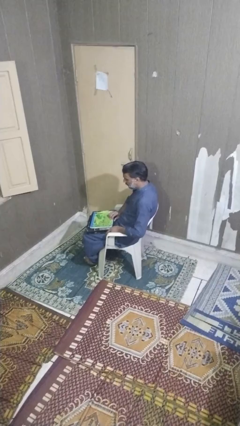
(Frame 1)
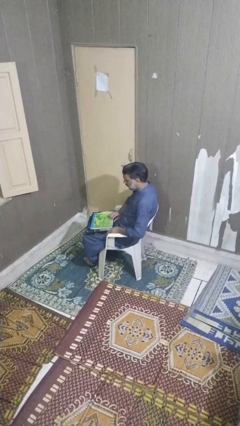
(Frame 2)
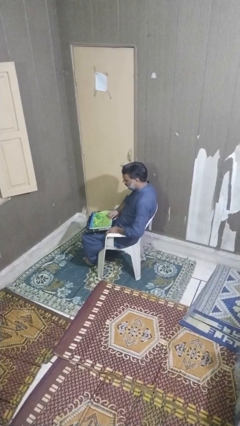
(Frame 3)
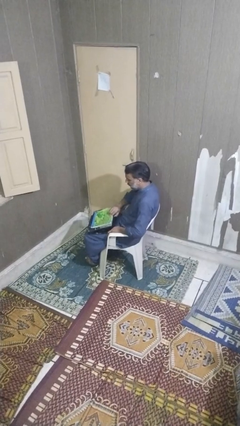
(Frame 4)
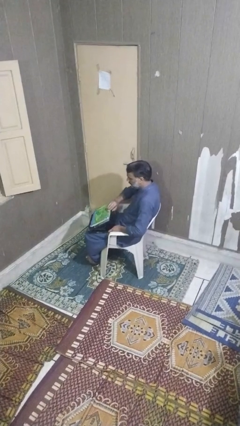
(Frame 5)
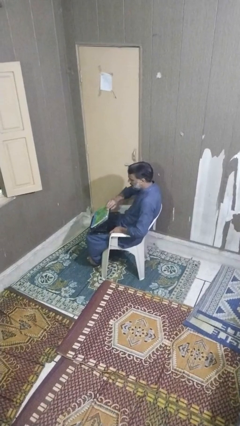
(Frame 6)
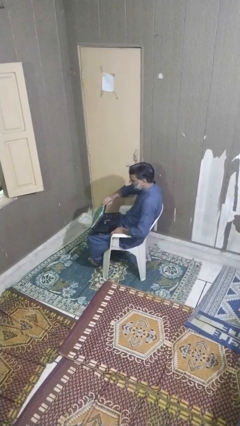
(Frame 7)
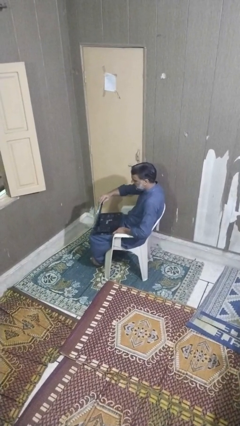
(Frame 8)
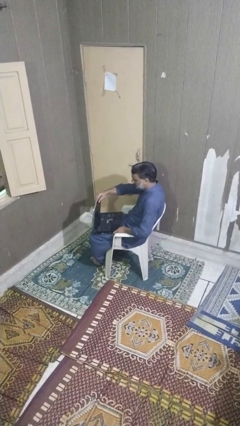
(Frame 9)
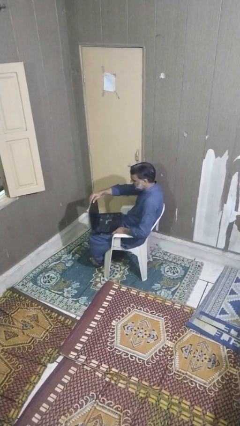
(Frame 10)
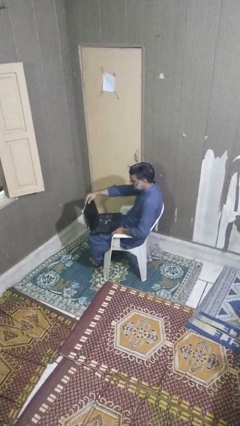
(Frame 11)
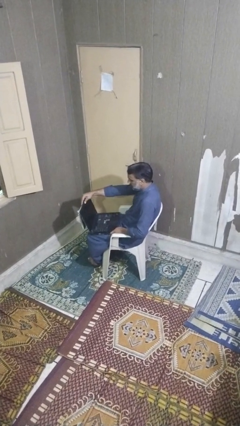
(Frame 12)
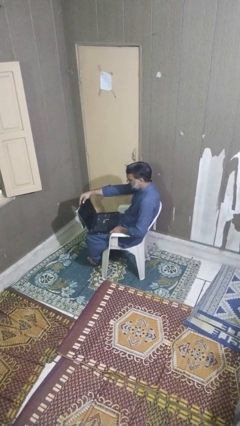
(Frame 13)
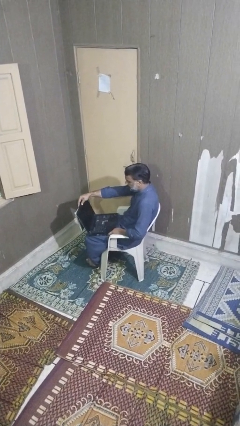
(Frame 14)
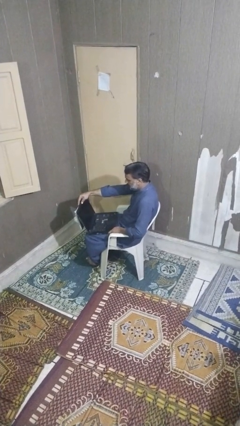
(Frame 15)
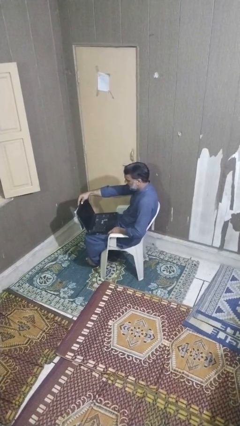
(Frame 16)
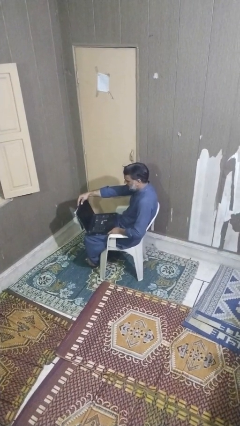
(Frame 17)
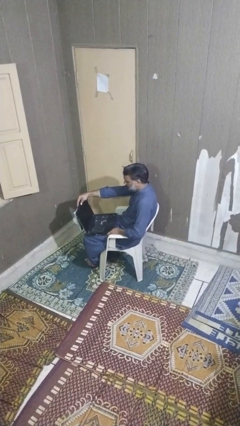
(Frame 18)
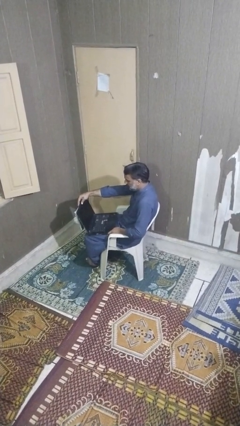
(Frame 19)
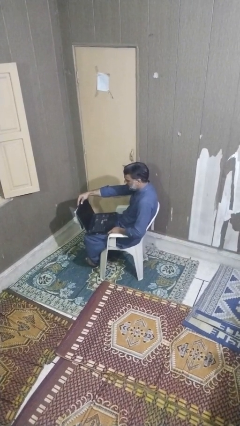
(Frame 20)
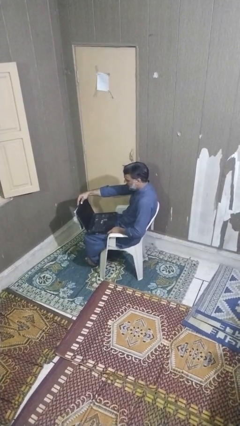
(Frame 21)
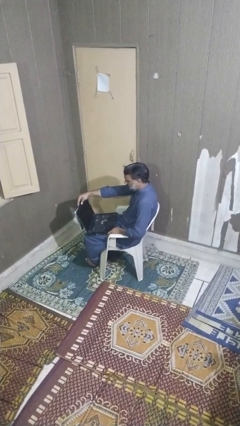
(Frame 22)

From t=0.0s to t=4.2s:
person opens laptop

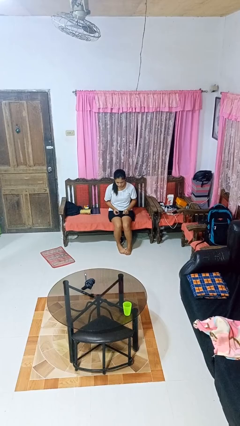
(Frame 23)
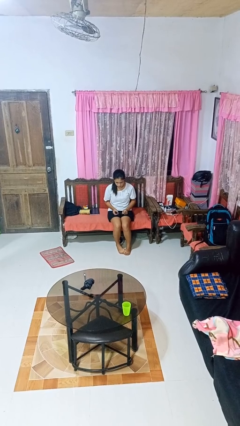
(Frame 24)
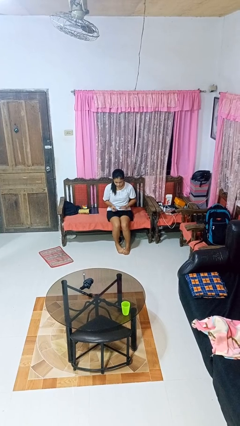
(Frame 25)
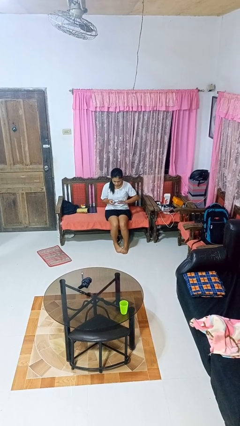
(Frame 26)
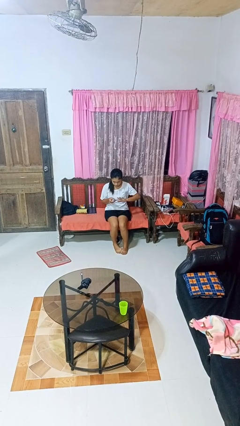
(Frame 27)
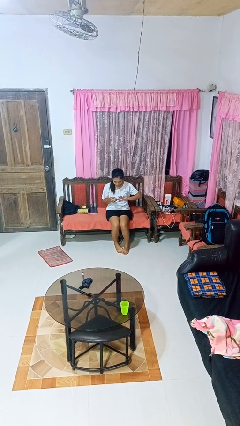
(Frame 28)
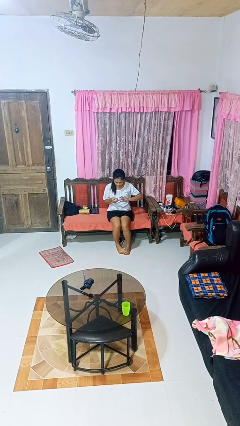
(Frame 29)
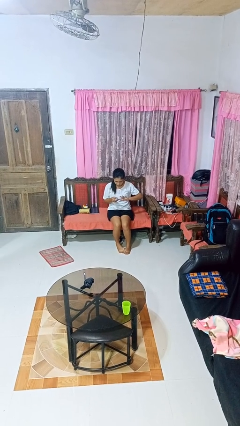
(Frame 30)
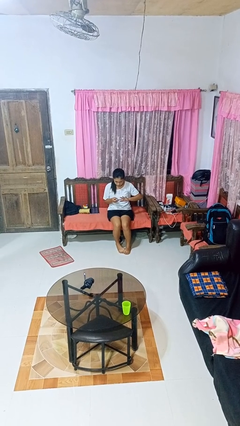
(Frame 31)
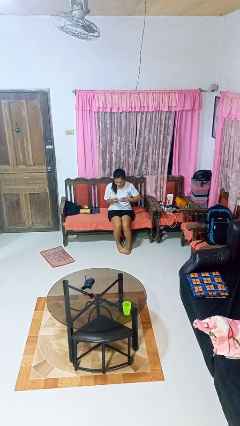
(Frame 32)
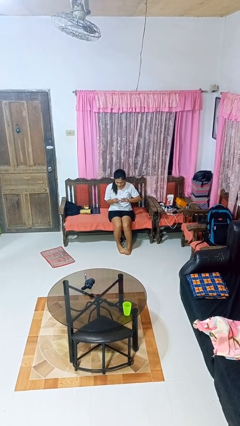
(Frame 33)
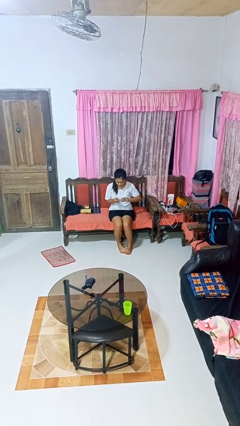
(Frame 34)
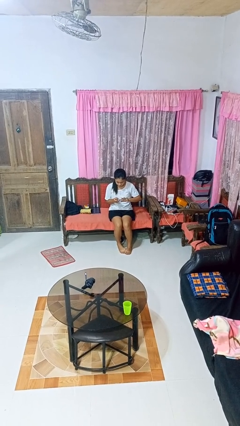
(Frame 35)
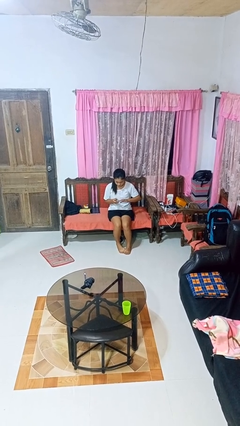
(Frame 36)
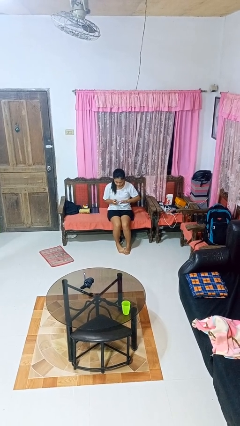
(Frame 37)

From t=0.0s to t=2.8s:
person clips fingernails

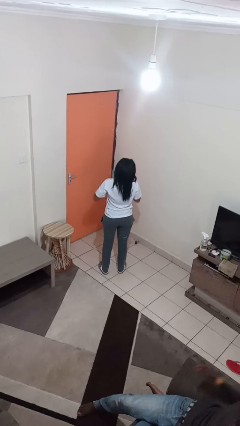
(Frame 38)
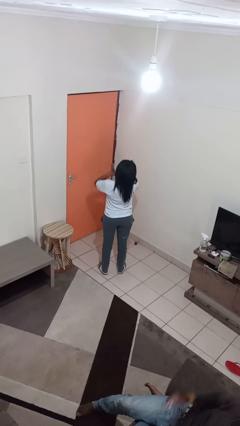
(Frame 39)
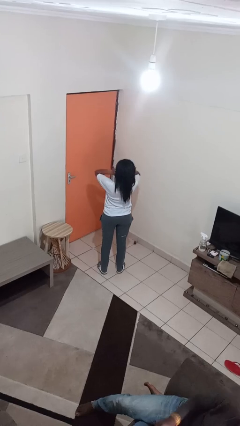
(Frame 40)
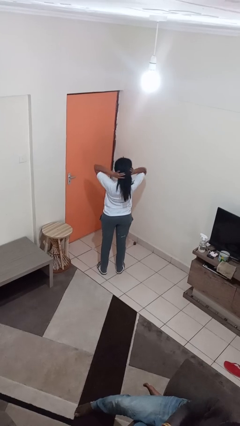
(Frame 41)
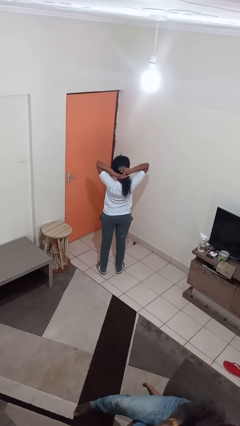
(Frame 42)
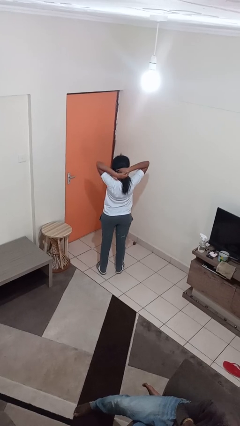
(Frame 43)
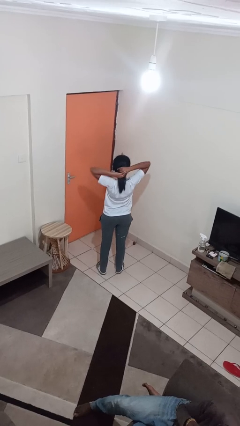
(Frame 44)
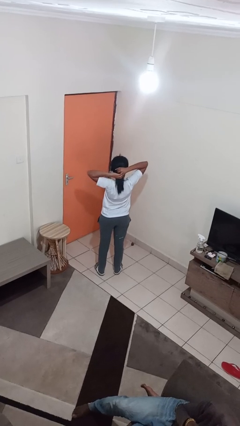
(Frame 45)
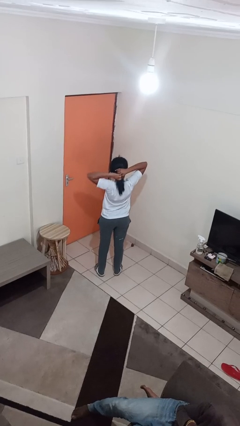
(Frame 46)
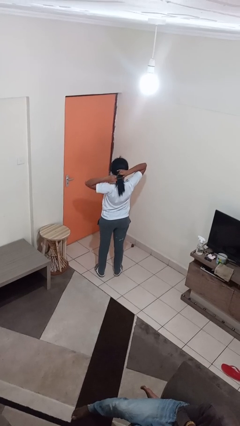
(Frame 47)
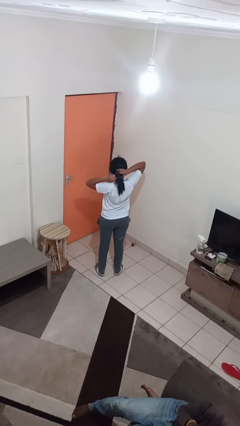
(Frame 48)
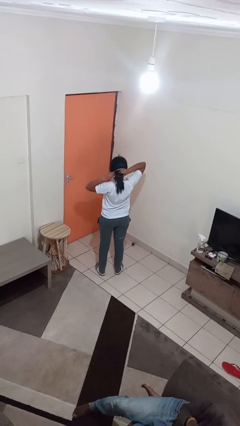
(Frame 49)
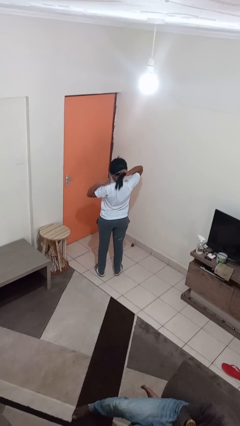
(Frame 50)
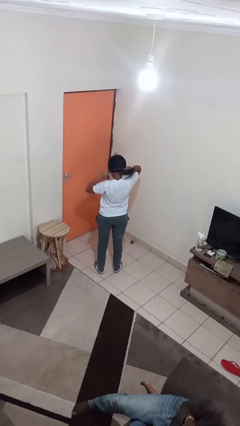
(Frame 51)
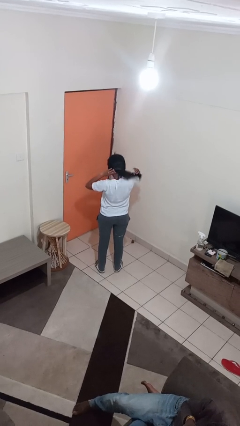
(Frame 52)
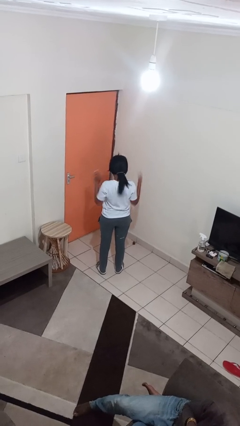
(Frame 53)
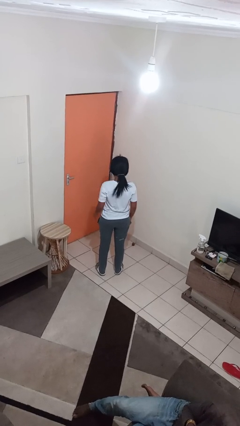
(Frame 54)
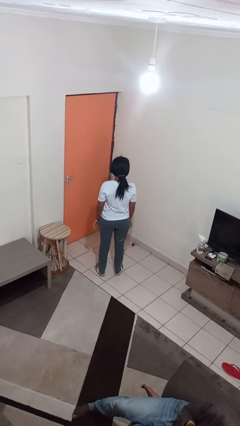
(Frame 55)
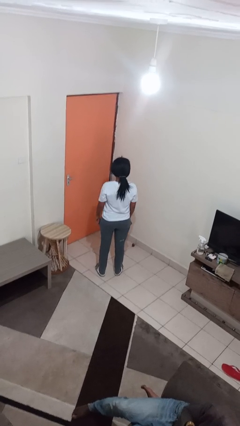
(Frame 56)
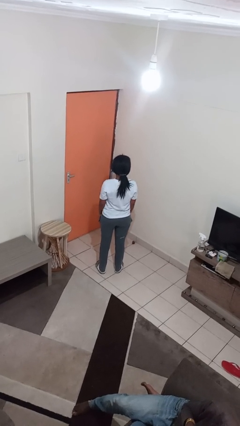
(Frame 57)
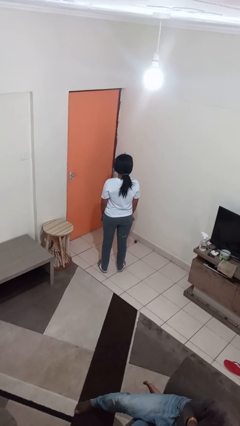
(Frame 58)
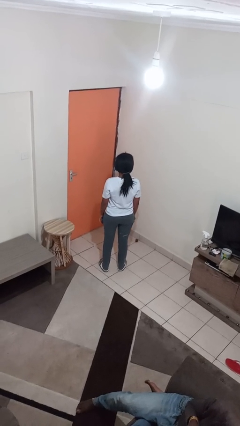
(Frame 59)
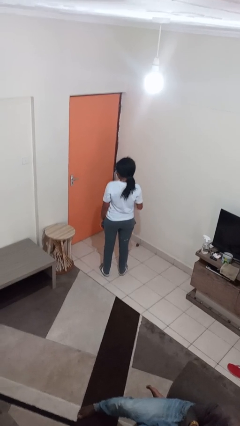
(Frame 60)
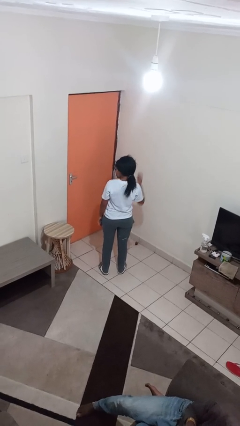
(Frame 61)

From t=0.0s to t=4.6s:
person puts hair in ponytail

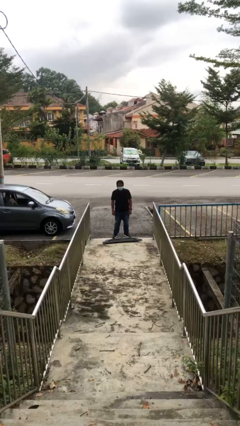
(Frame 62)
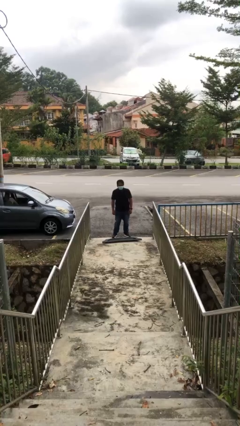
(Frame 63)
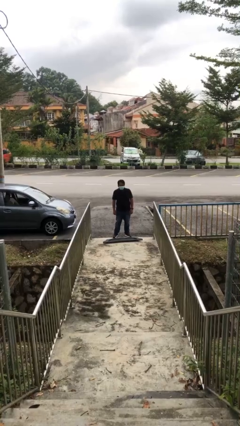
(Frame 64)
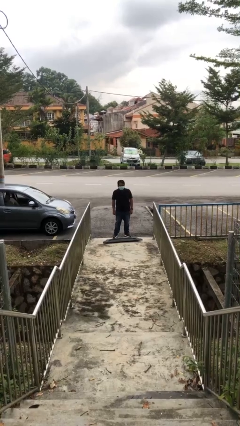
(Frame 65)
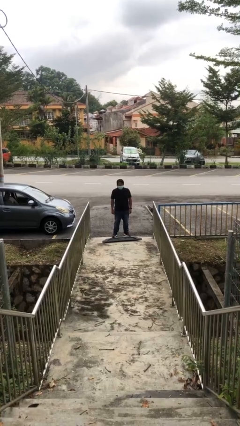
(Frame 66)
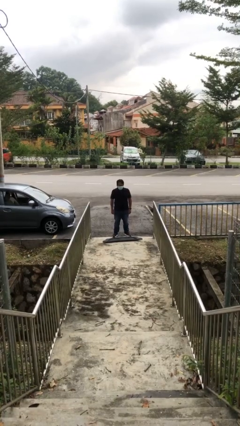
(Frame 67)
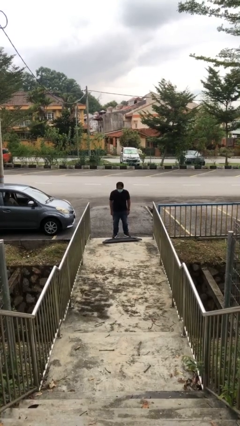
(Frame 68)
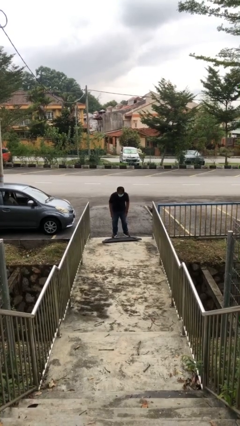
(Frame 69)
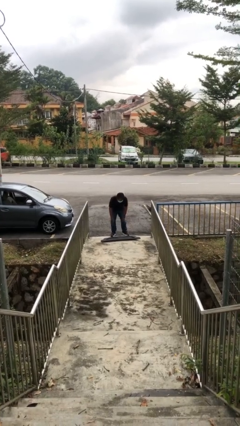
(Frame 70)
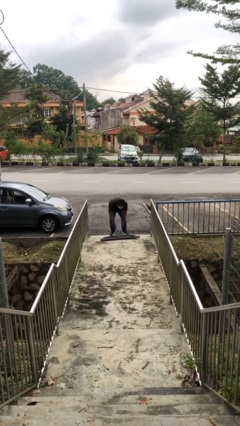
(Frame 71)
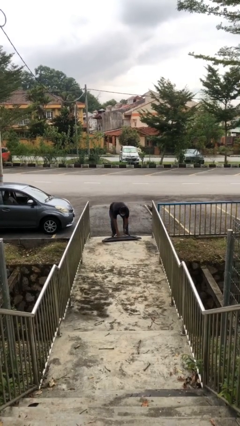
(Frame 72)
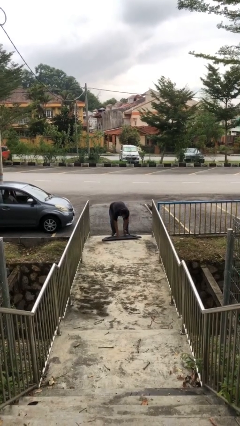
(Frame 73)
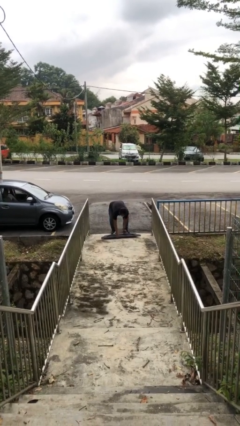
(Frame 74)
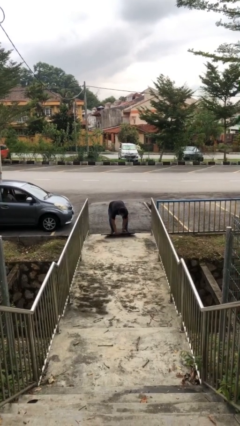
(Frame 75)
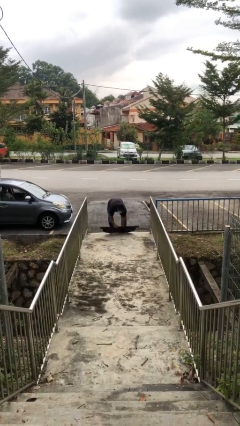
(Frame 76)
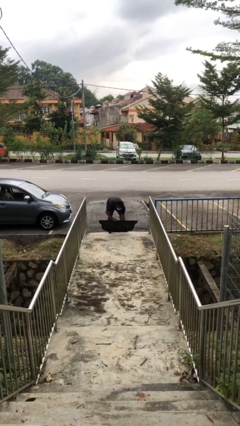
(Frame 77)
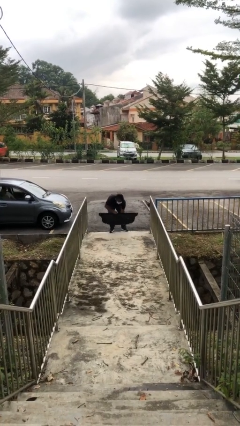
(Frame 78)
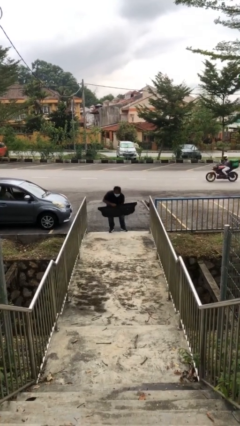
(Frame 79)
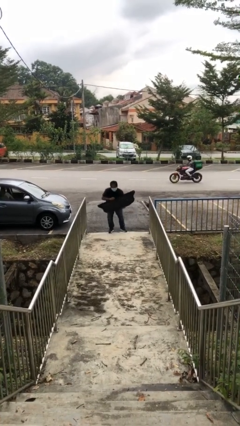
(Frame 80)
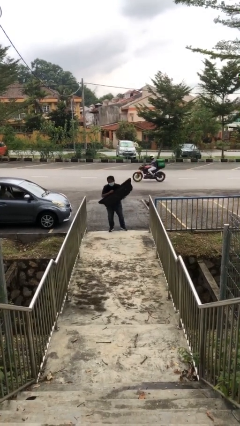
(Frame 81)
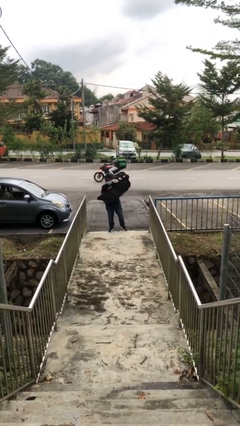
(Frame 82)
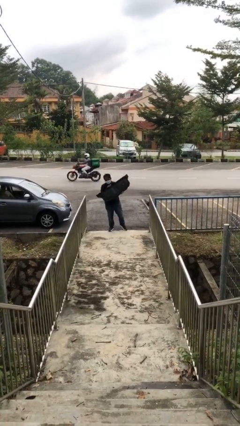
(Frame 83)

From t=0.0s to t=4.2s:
person picks up object from floor

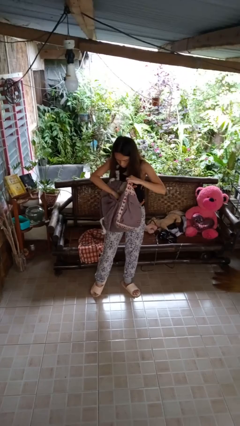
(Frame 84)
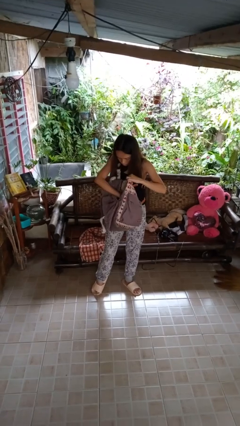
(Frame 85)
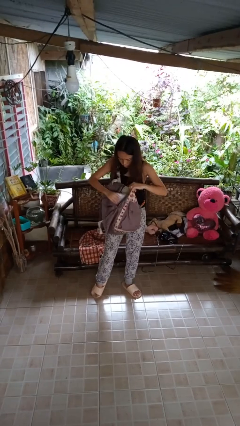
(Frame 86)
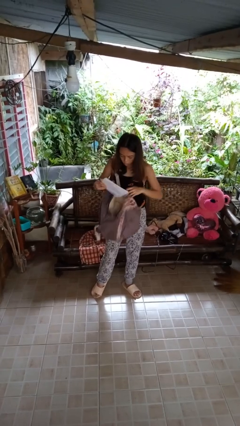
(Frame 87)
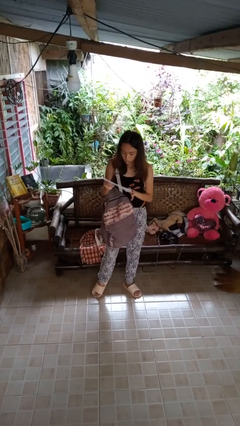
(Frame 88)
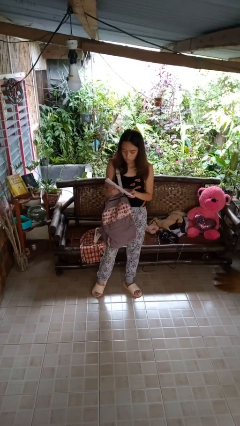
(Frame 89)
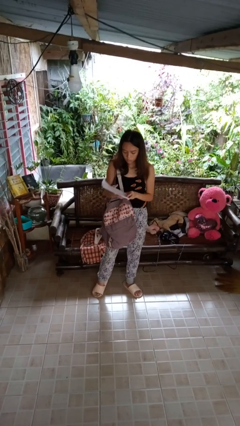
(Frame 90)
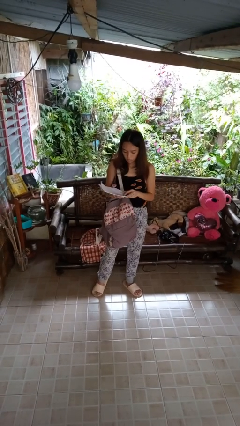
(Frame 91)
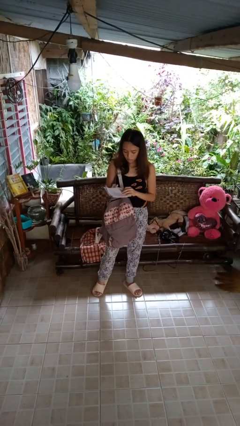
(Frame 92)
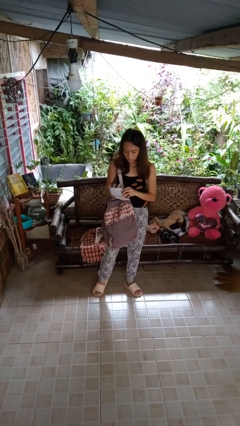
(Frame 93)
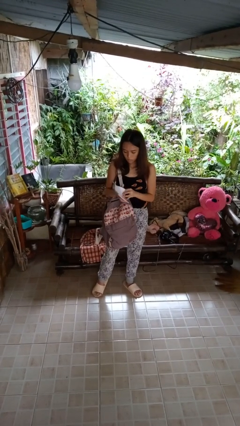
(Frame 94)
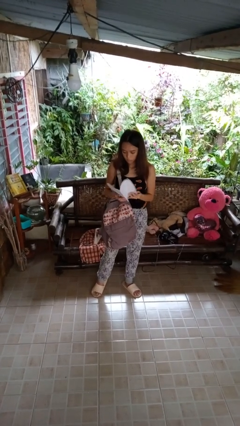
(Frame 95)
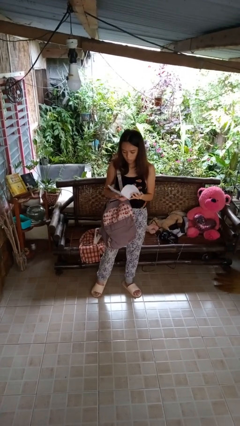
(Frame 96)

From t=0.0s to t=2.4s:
person takes object from backpack
